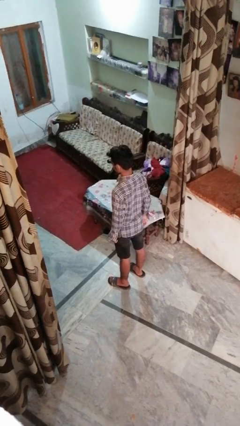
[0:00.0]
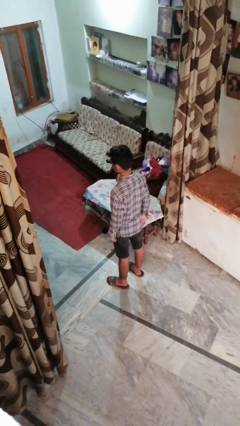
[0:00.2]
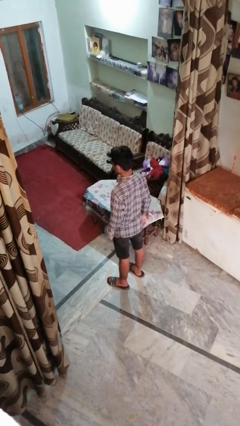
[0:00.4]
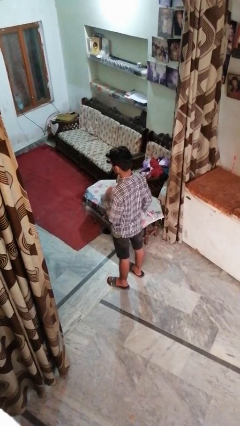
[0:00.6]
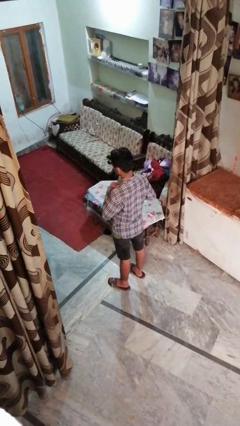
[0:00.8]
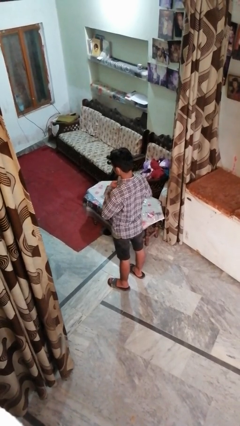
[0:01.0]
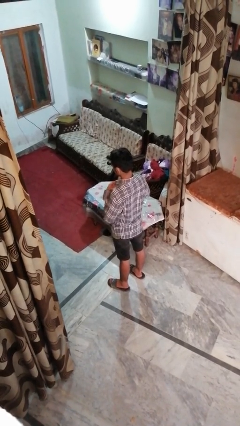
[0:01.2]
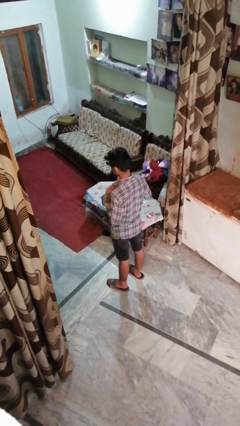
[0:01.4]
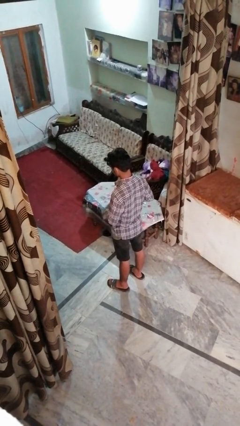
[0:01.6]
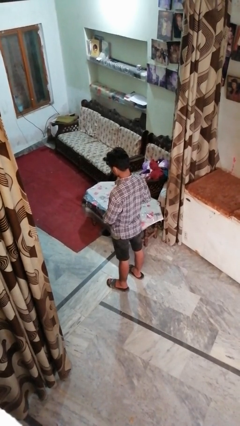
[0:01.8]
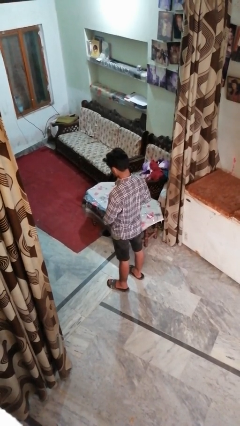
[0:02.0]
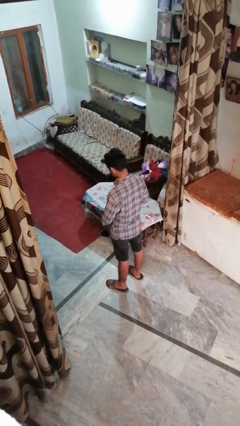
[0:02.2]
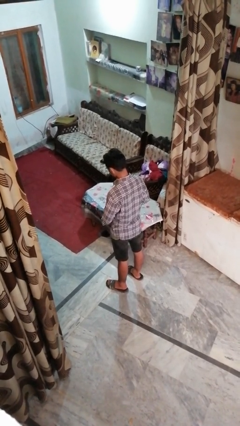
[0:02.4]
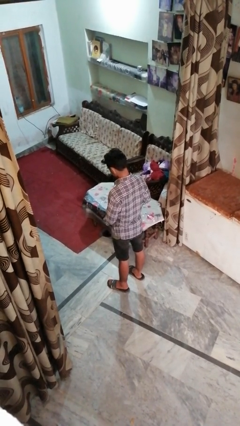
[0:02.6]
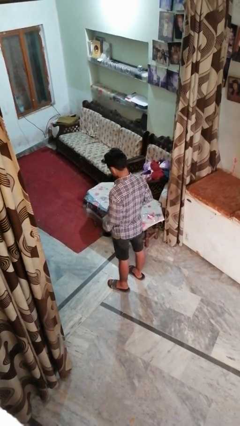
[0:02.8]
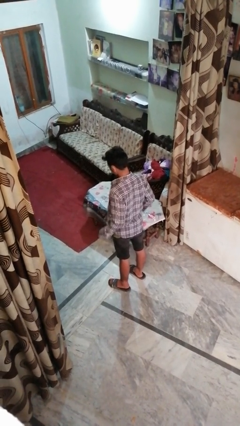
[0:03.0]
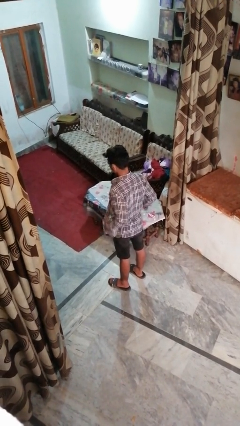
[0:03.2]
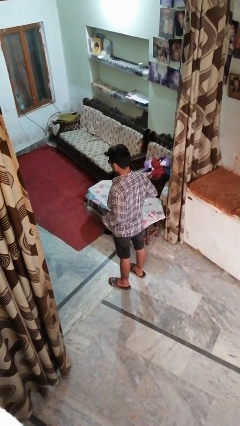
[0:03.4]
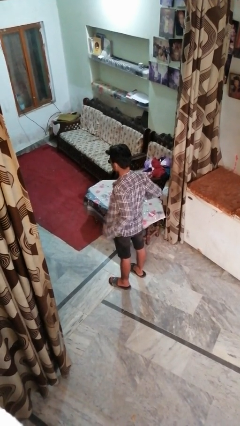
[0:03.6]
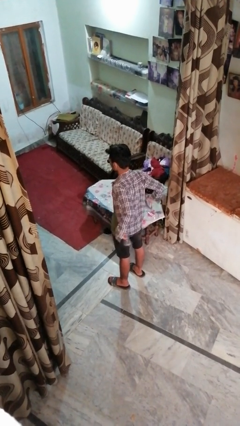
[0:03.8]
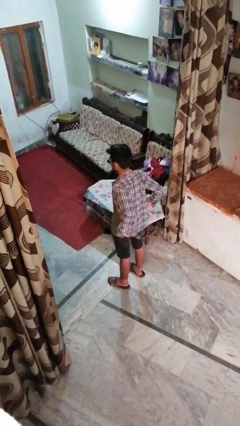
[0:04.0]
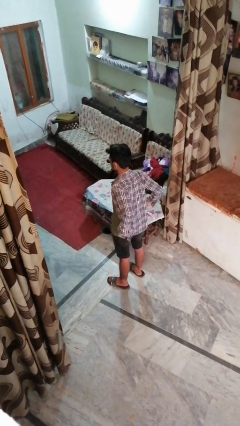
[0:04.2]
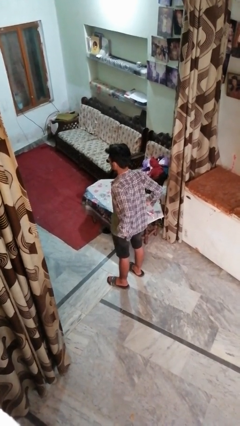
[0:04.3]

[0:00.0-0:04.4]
person unbuttons shirt

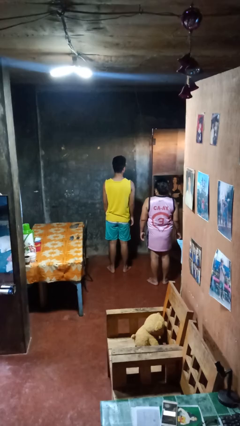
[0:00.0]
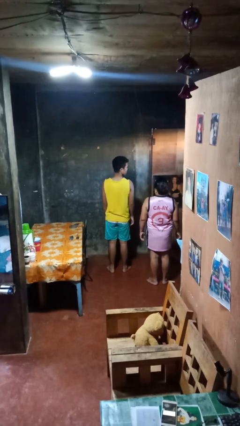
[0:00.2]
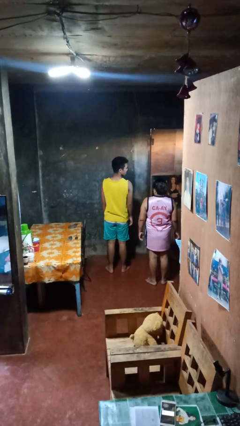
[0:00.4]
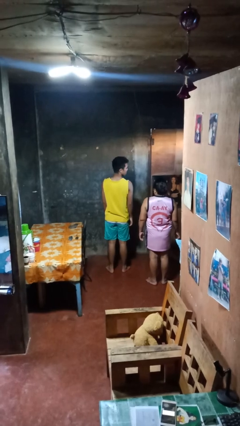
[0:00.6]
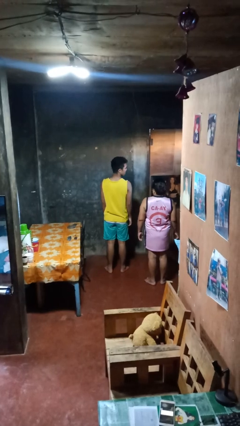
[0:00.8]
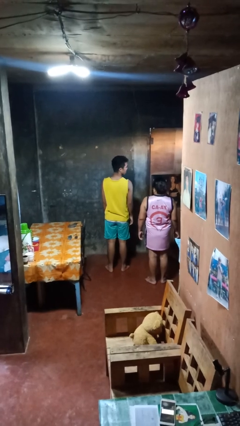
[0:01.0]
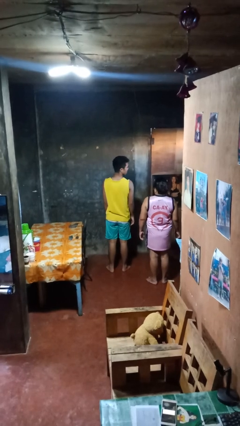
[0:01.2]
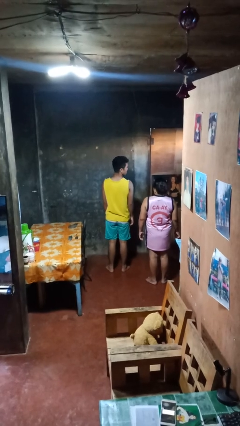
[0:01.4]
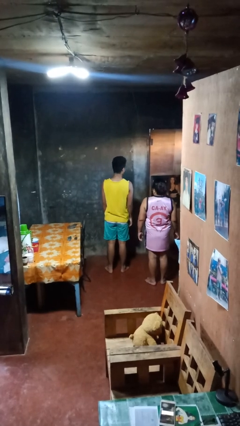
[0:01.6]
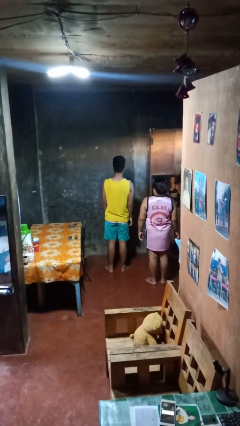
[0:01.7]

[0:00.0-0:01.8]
person looks over shoulder

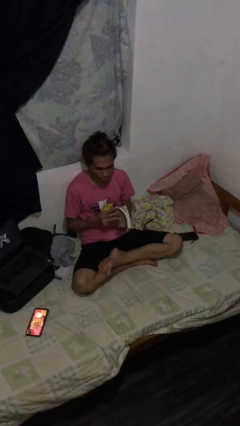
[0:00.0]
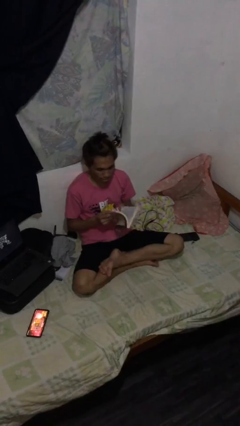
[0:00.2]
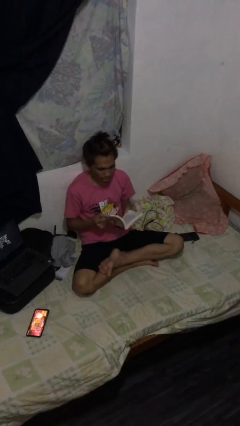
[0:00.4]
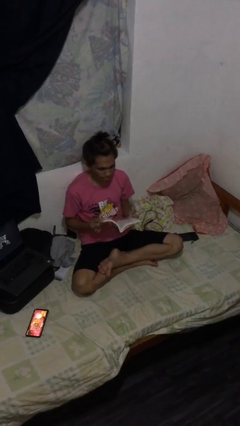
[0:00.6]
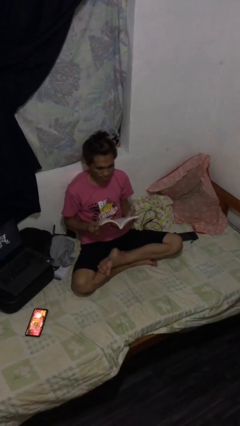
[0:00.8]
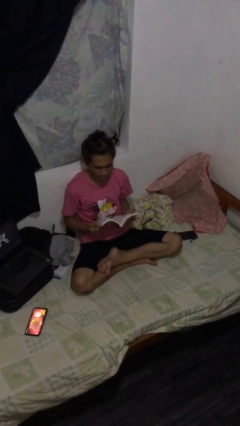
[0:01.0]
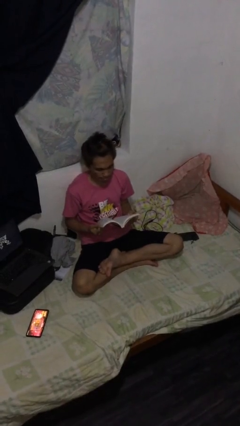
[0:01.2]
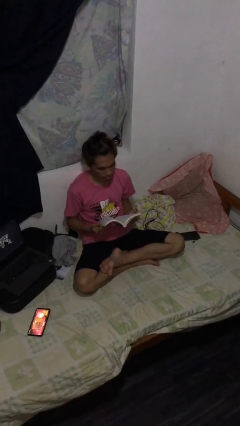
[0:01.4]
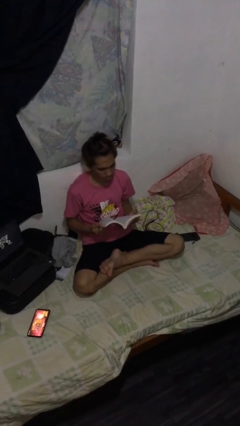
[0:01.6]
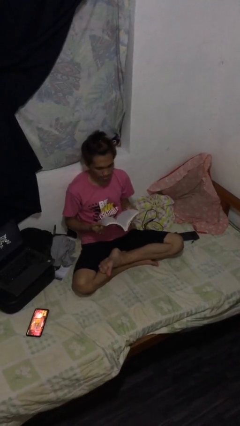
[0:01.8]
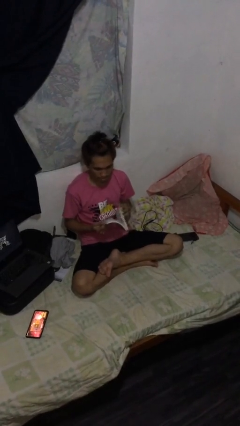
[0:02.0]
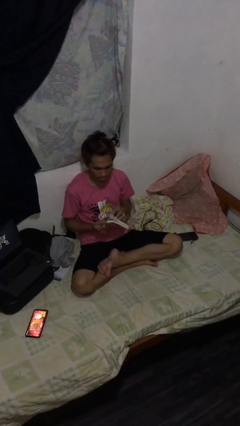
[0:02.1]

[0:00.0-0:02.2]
person reads document

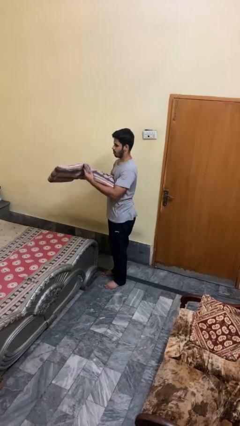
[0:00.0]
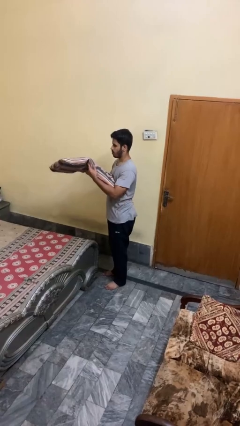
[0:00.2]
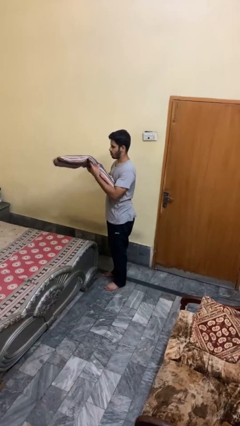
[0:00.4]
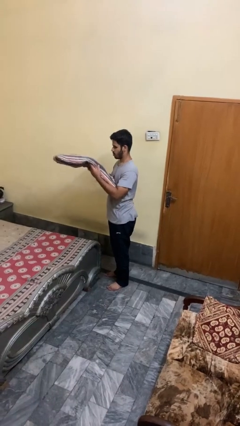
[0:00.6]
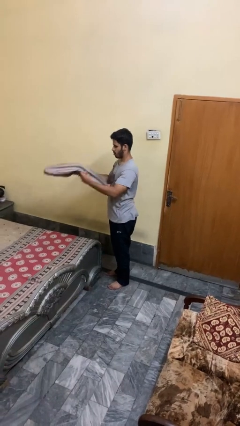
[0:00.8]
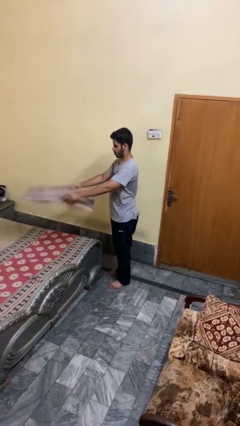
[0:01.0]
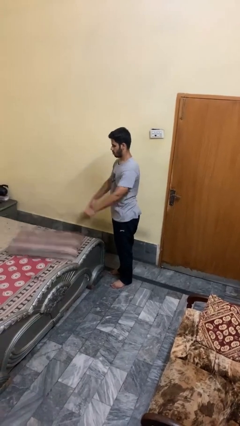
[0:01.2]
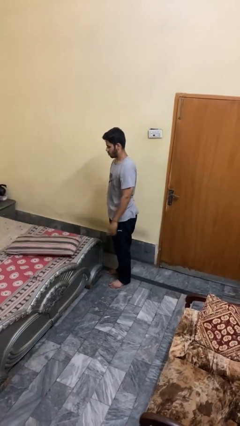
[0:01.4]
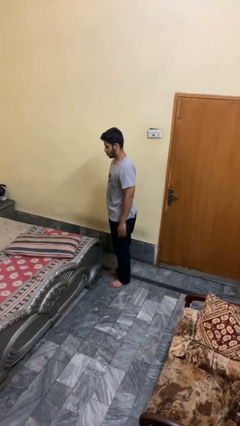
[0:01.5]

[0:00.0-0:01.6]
person puts down object on bed

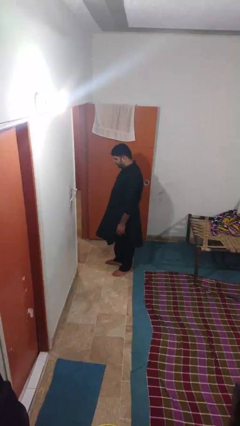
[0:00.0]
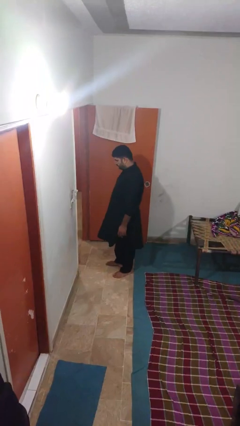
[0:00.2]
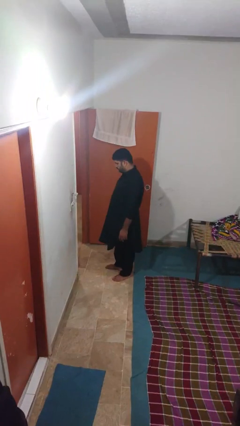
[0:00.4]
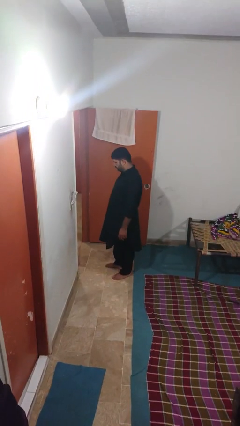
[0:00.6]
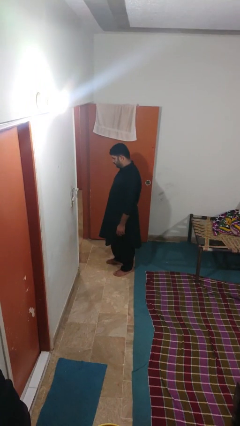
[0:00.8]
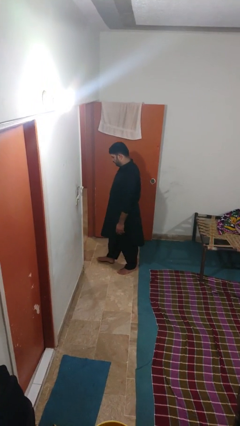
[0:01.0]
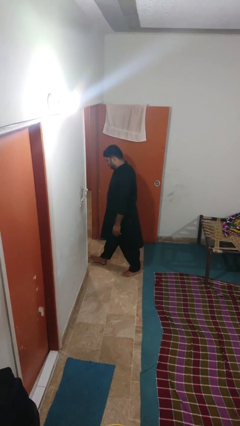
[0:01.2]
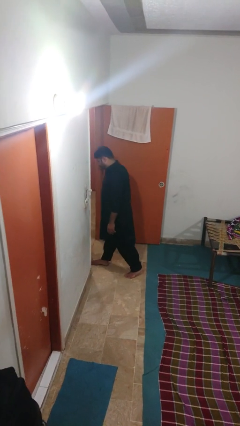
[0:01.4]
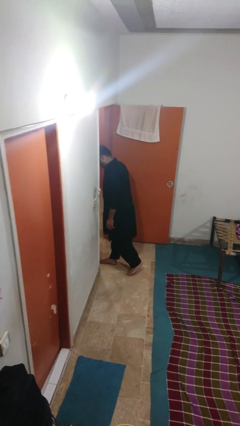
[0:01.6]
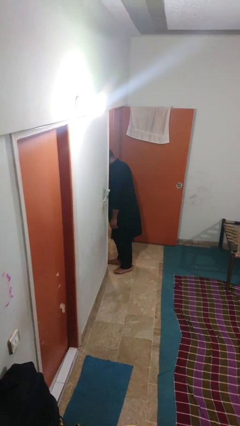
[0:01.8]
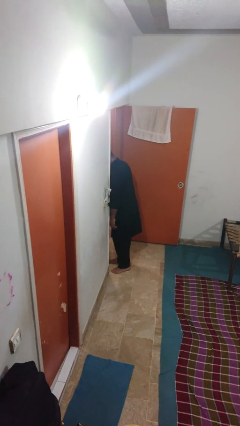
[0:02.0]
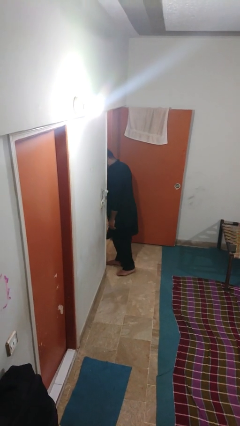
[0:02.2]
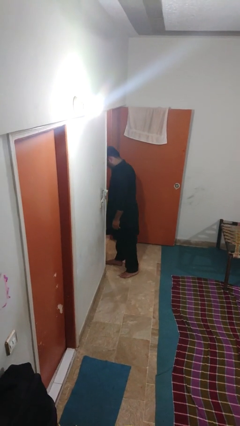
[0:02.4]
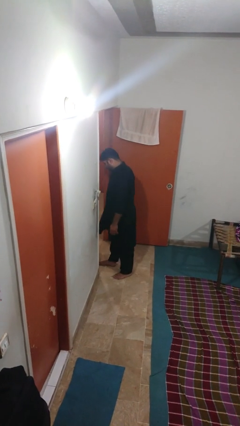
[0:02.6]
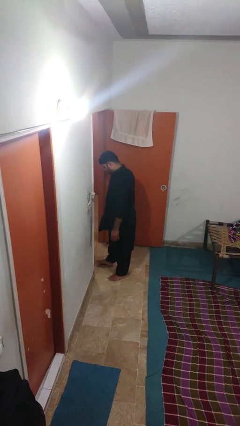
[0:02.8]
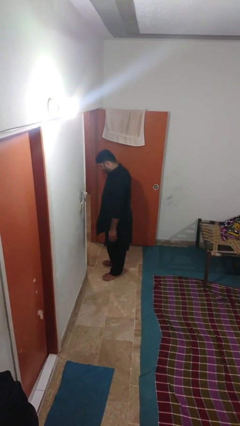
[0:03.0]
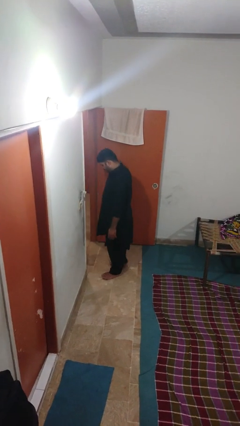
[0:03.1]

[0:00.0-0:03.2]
person bumps into wall

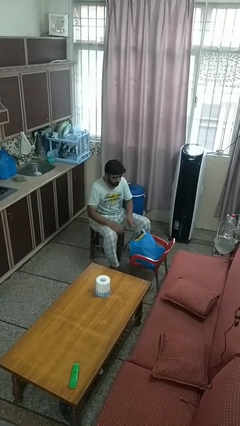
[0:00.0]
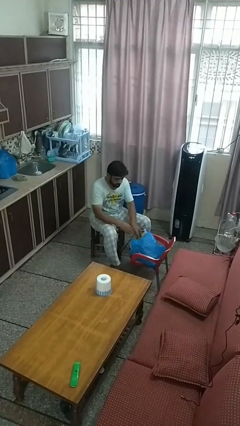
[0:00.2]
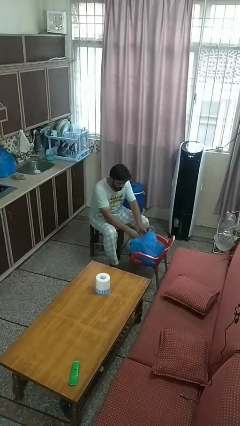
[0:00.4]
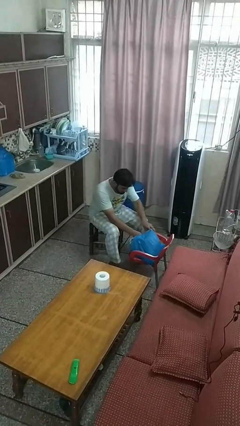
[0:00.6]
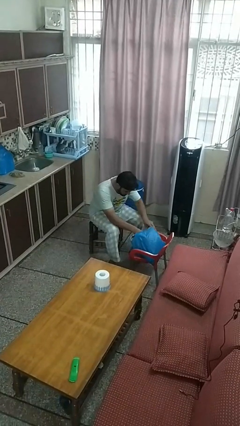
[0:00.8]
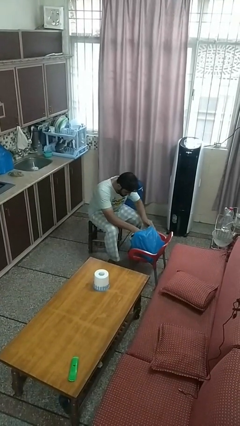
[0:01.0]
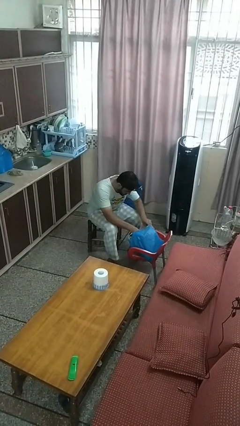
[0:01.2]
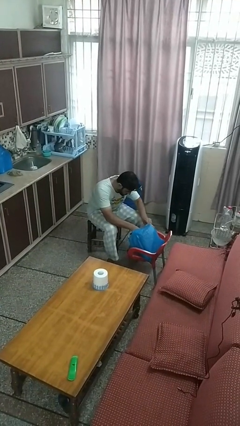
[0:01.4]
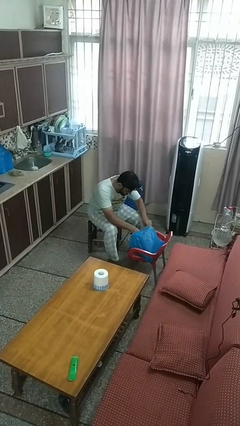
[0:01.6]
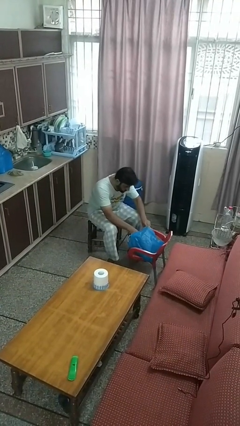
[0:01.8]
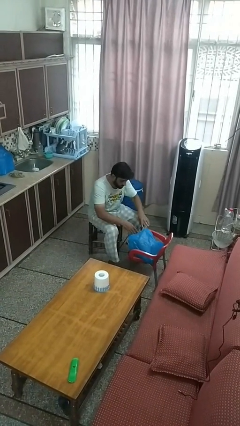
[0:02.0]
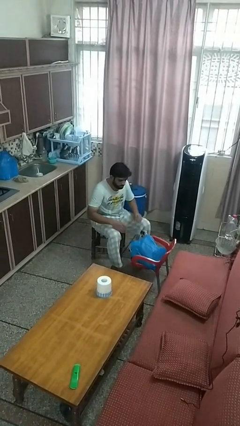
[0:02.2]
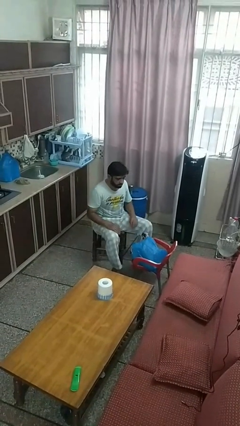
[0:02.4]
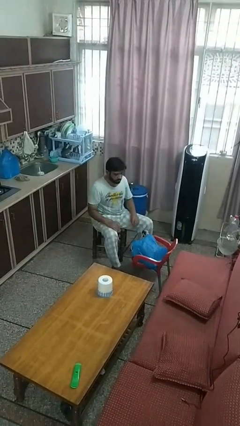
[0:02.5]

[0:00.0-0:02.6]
person searches in bag

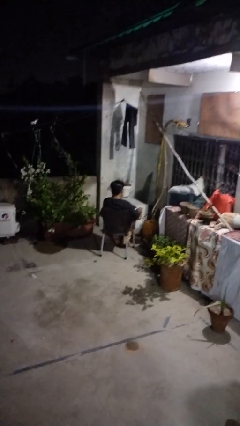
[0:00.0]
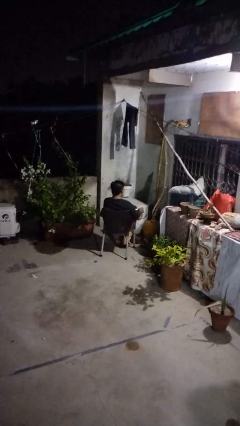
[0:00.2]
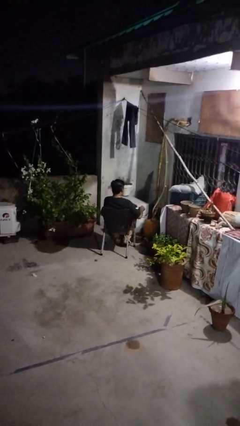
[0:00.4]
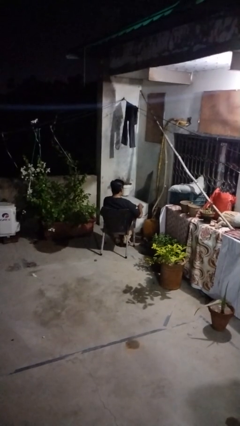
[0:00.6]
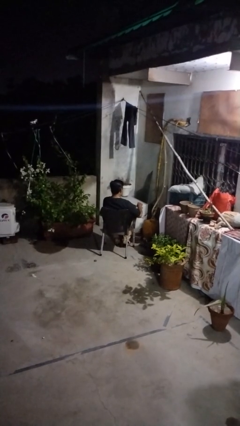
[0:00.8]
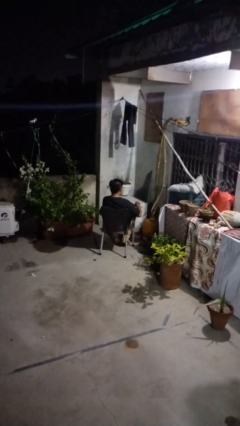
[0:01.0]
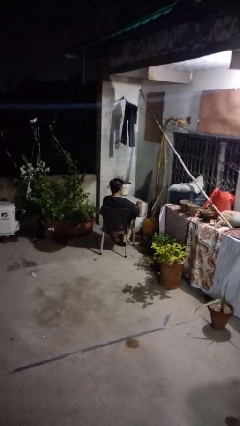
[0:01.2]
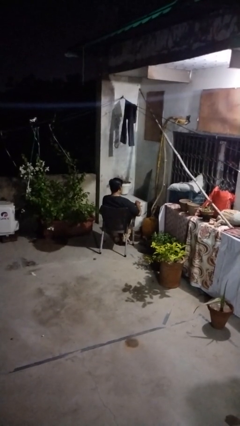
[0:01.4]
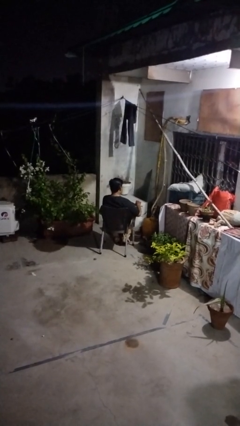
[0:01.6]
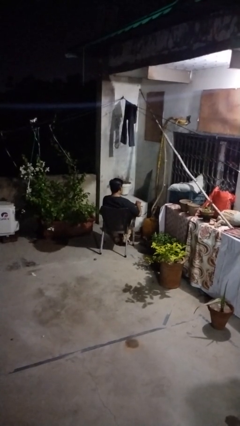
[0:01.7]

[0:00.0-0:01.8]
person stirs mug
